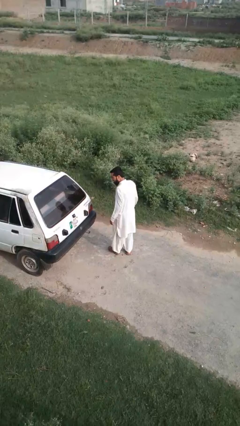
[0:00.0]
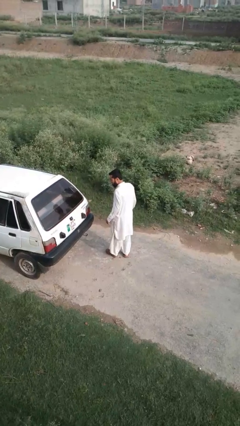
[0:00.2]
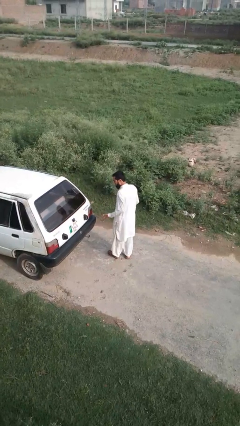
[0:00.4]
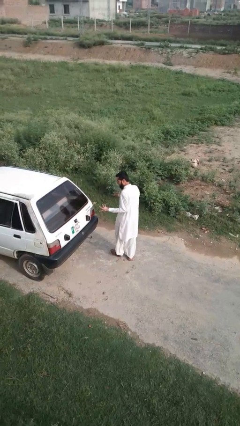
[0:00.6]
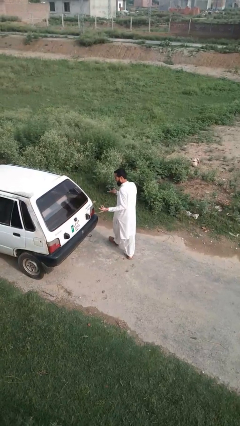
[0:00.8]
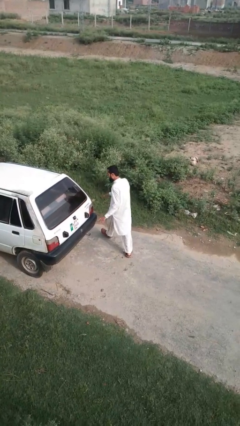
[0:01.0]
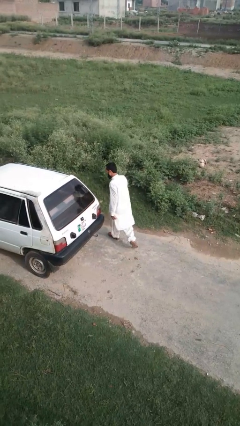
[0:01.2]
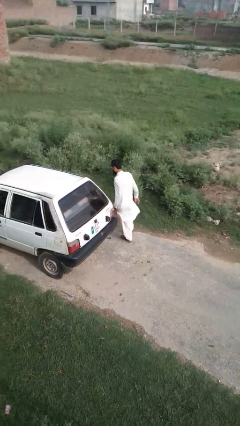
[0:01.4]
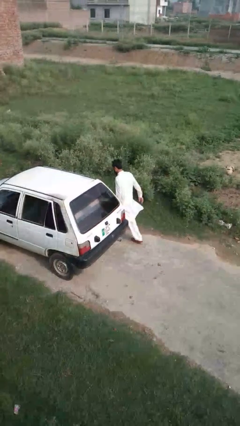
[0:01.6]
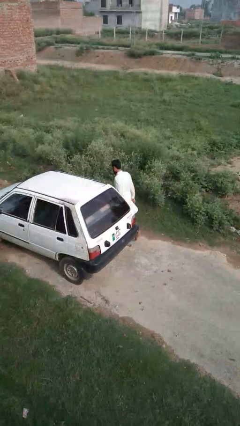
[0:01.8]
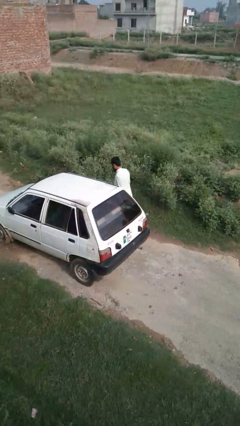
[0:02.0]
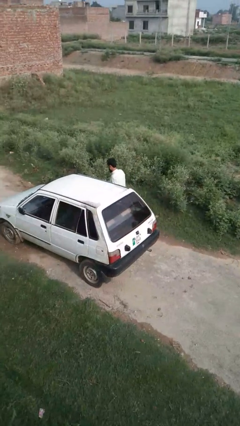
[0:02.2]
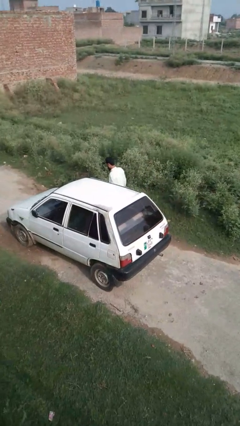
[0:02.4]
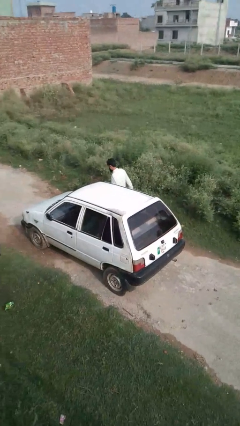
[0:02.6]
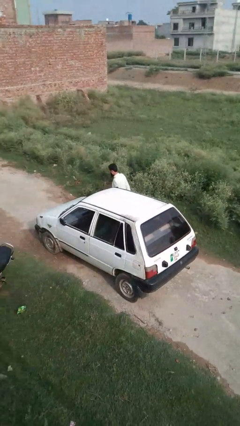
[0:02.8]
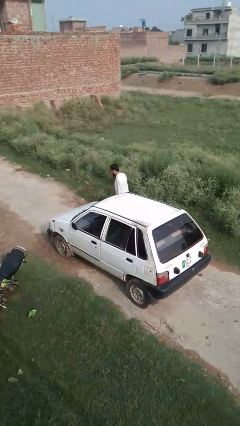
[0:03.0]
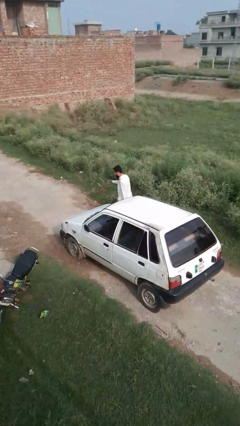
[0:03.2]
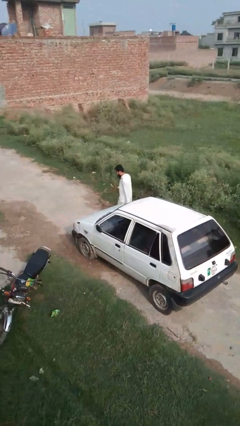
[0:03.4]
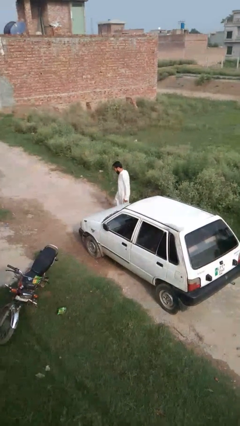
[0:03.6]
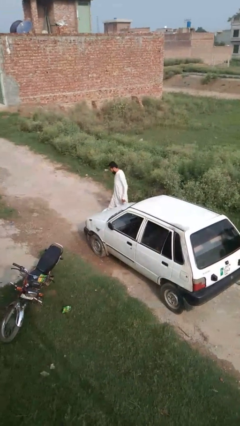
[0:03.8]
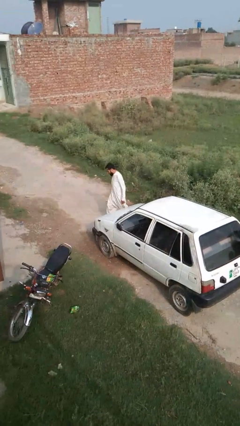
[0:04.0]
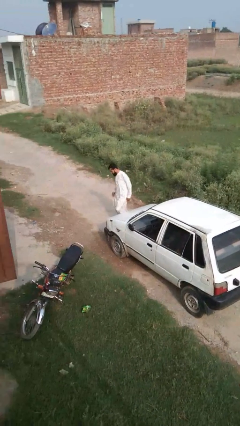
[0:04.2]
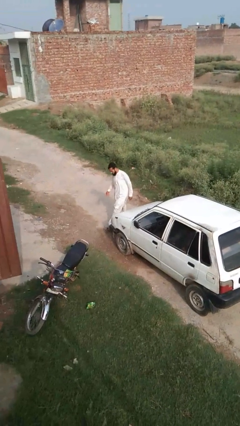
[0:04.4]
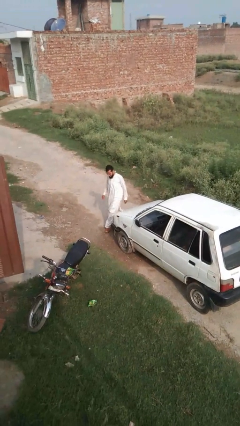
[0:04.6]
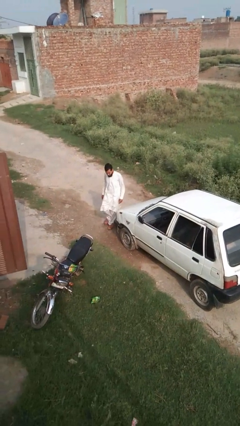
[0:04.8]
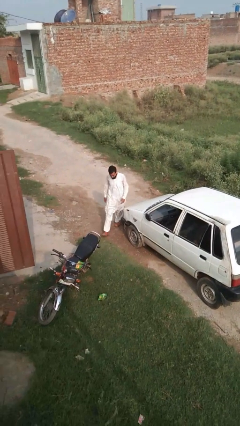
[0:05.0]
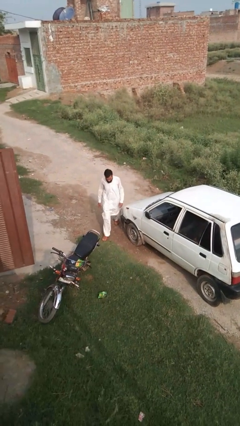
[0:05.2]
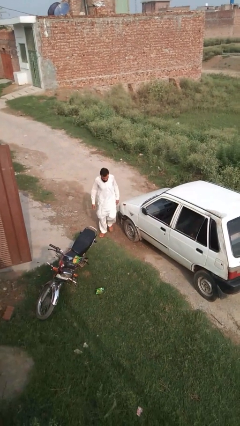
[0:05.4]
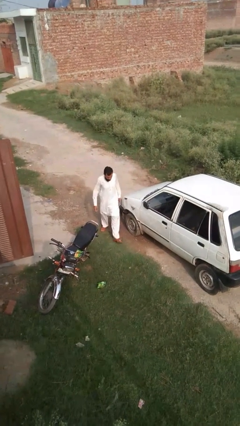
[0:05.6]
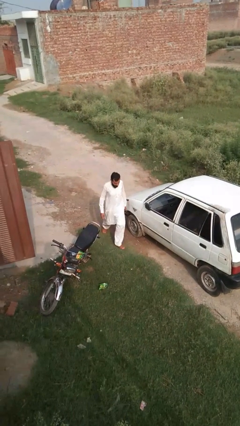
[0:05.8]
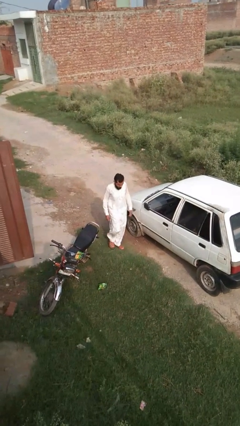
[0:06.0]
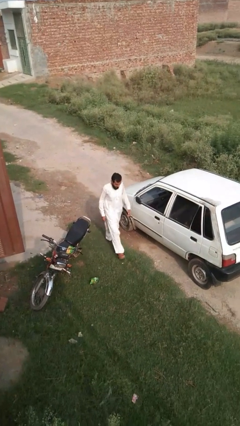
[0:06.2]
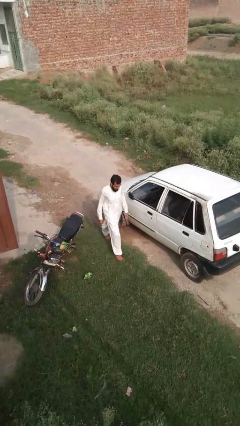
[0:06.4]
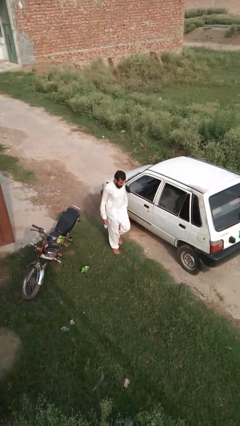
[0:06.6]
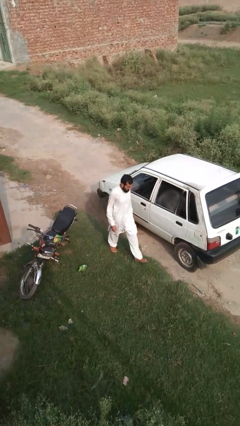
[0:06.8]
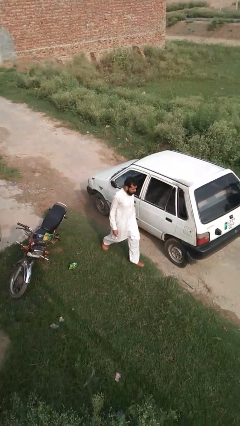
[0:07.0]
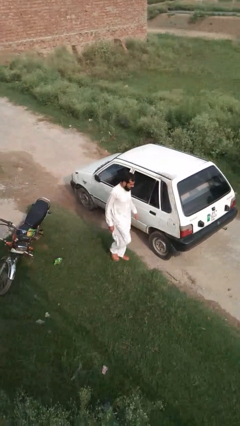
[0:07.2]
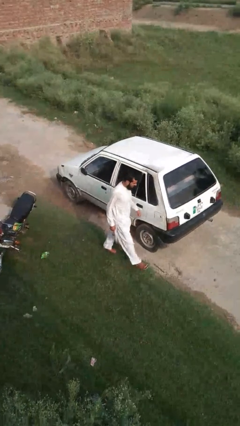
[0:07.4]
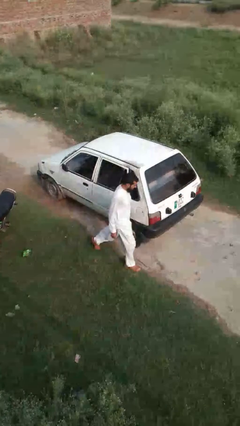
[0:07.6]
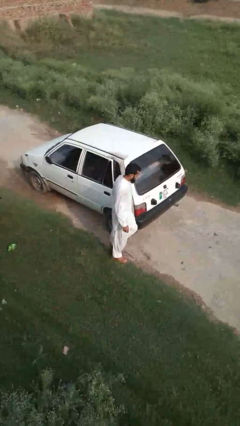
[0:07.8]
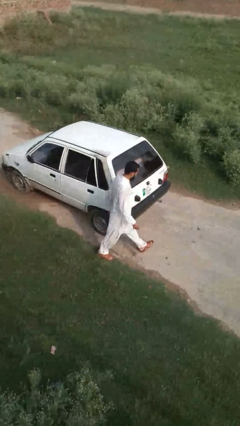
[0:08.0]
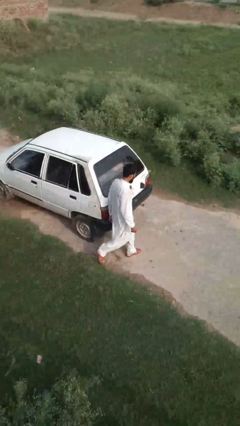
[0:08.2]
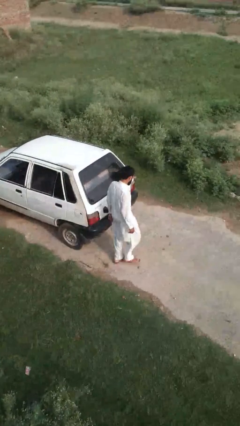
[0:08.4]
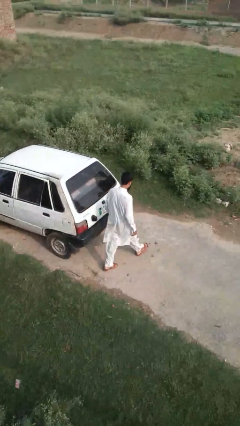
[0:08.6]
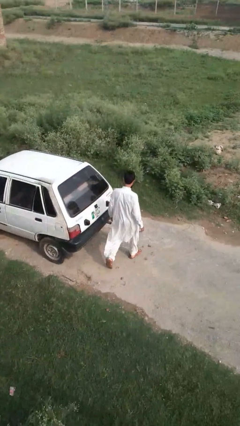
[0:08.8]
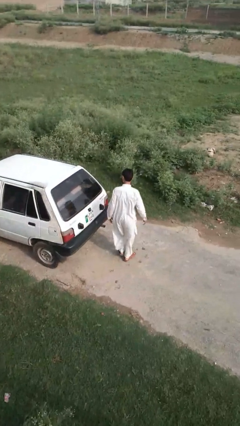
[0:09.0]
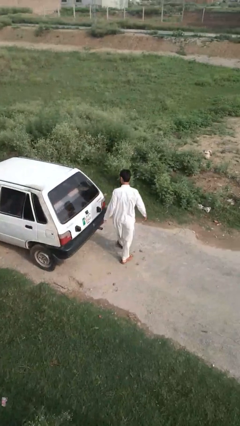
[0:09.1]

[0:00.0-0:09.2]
person walks around car

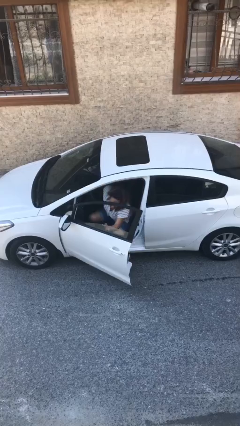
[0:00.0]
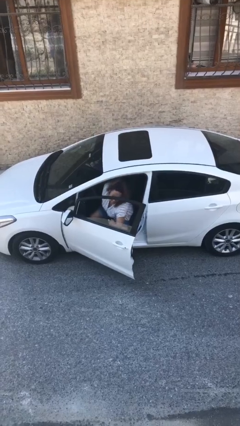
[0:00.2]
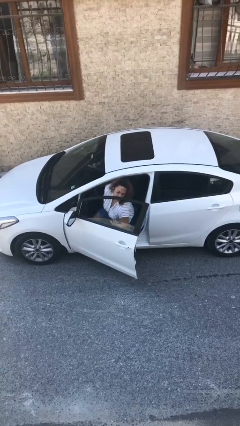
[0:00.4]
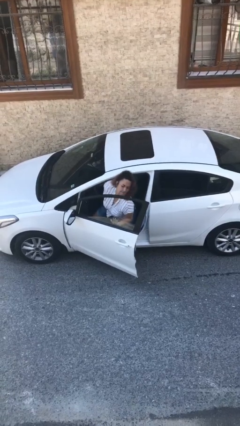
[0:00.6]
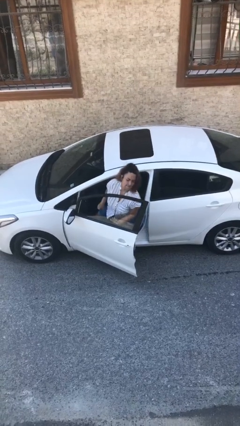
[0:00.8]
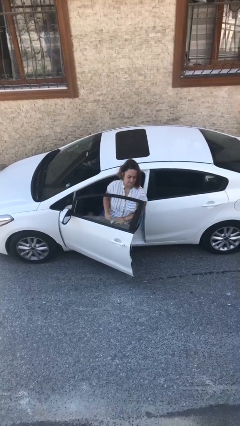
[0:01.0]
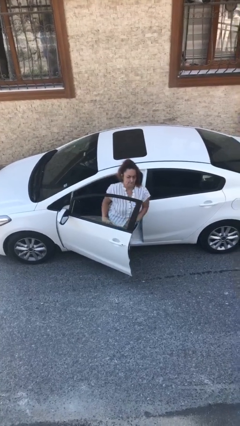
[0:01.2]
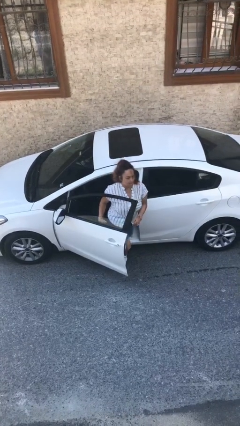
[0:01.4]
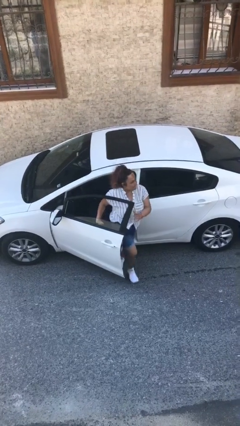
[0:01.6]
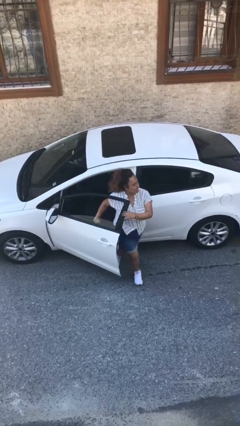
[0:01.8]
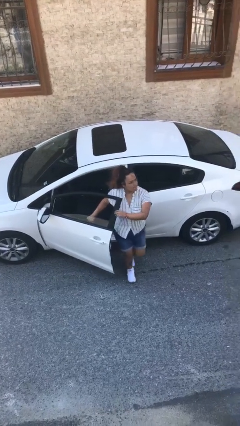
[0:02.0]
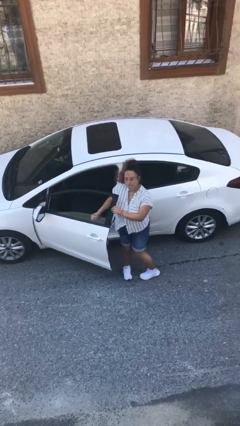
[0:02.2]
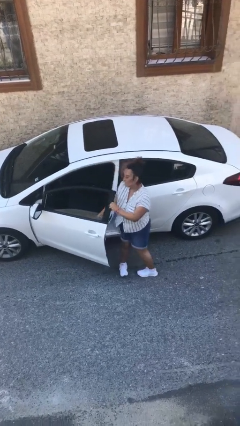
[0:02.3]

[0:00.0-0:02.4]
person exits car

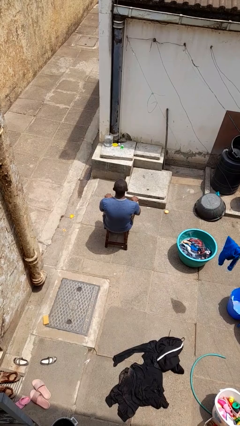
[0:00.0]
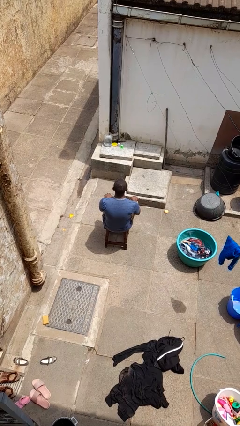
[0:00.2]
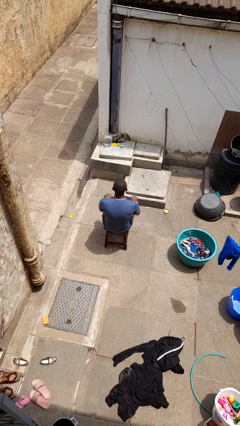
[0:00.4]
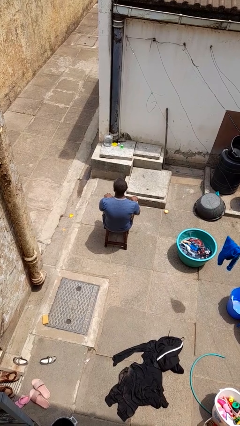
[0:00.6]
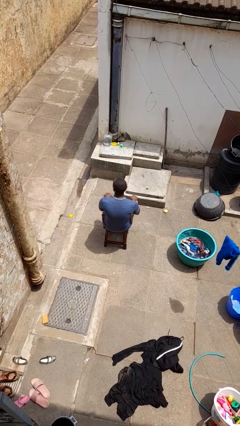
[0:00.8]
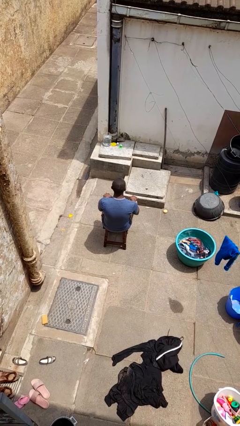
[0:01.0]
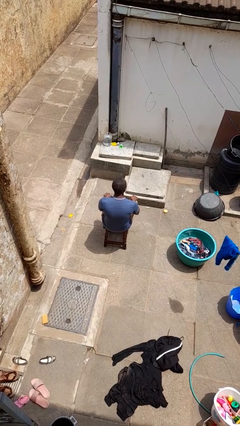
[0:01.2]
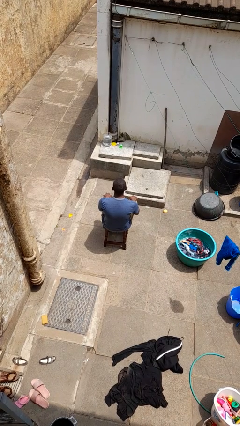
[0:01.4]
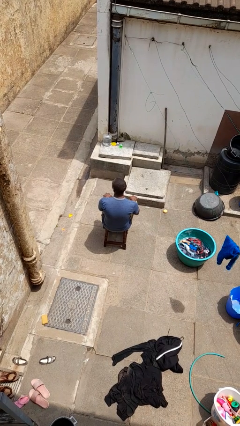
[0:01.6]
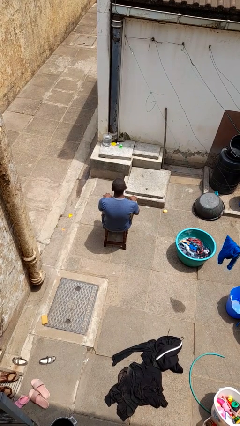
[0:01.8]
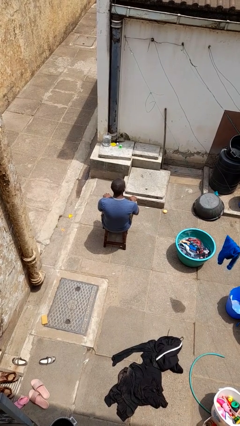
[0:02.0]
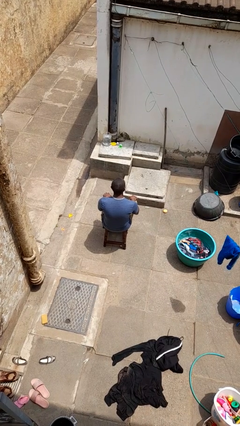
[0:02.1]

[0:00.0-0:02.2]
person shakes head

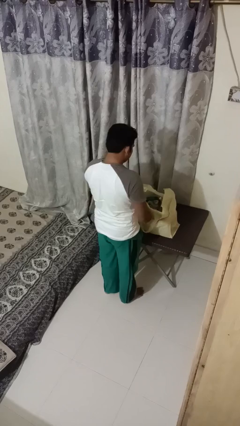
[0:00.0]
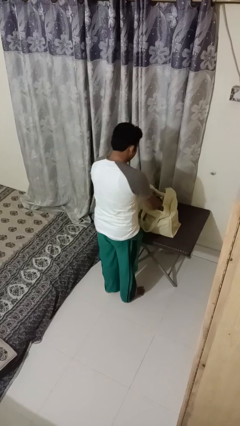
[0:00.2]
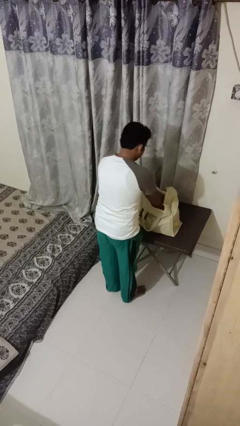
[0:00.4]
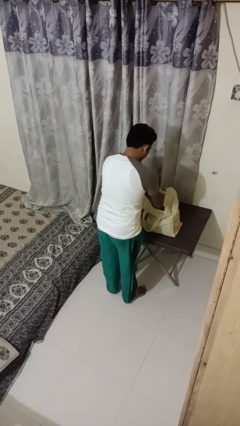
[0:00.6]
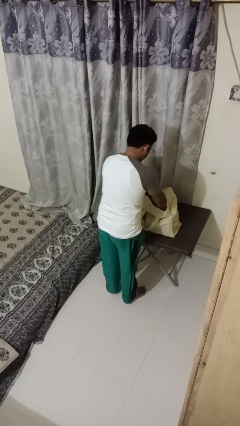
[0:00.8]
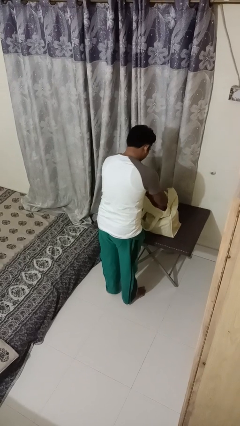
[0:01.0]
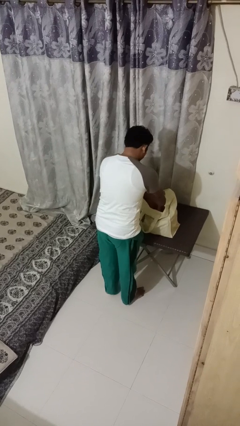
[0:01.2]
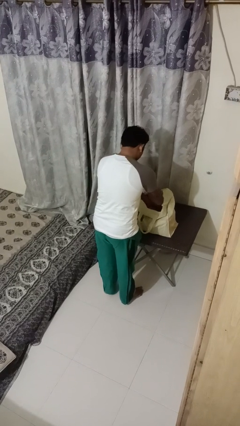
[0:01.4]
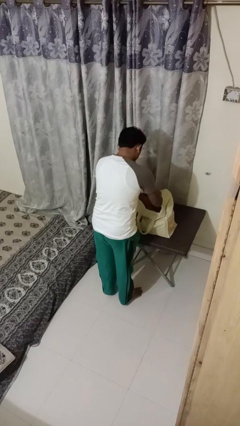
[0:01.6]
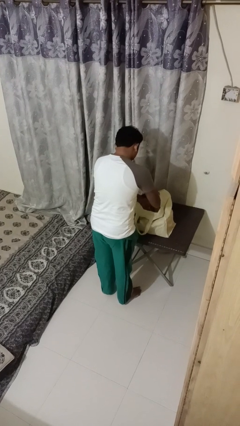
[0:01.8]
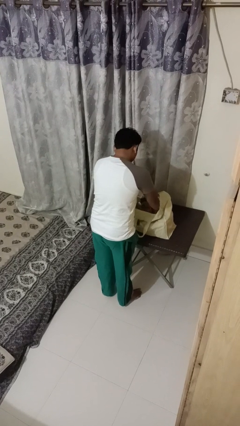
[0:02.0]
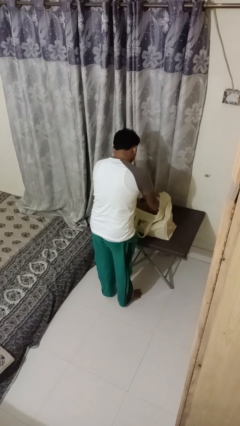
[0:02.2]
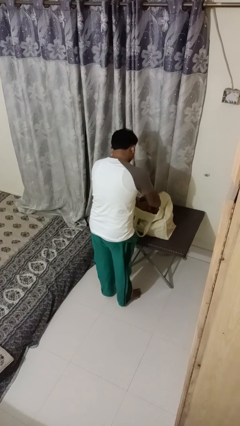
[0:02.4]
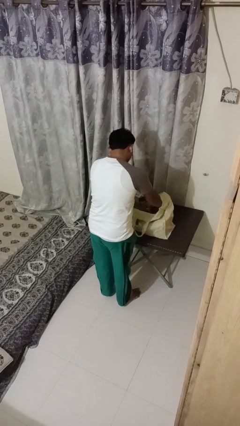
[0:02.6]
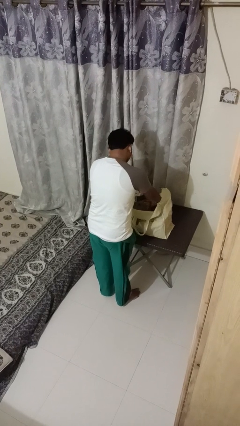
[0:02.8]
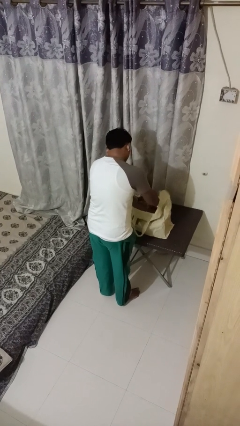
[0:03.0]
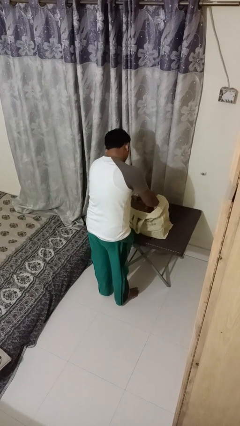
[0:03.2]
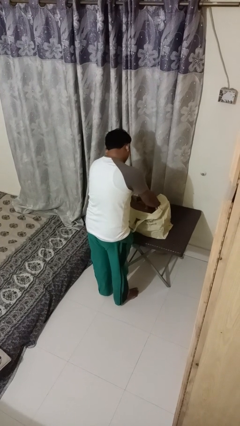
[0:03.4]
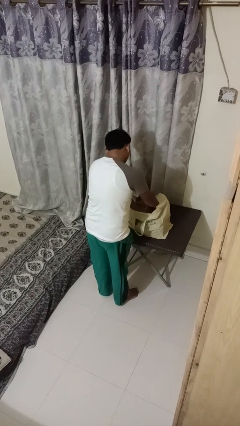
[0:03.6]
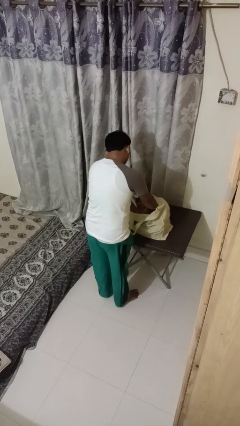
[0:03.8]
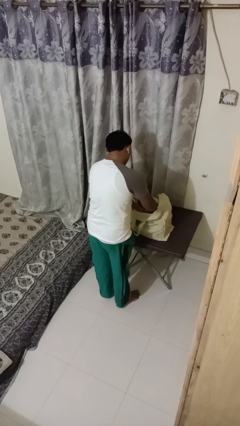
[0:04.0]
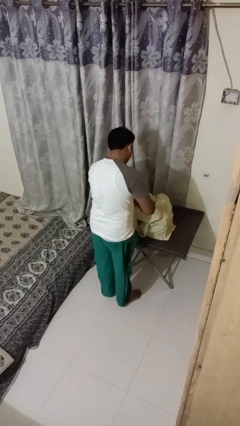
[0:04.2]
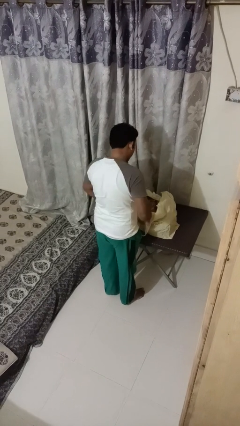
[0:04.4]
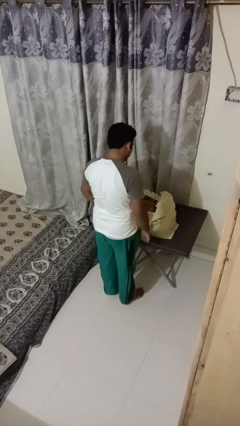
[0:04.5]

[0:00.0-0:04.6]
person searches in bag
